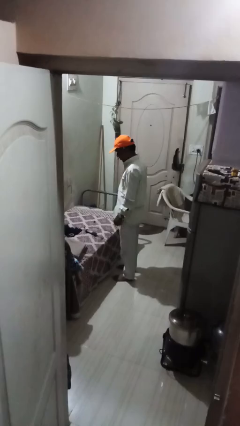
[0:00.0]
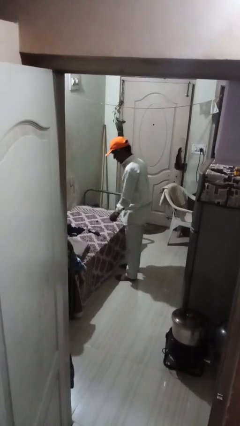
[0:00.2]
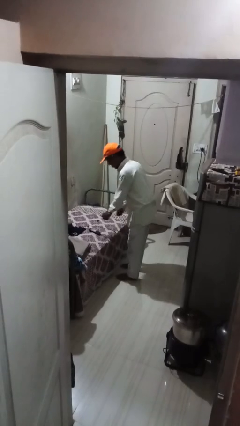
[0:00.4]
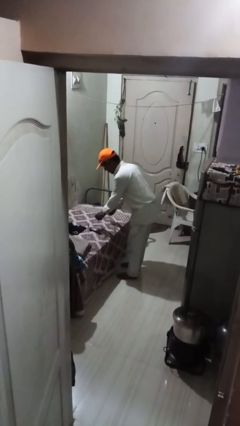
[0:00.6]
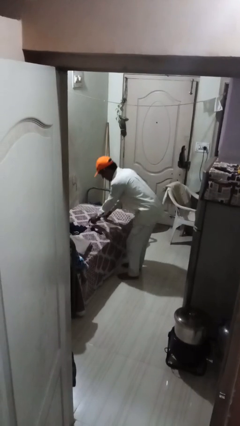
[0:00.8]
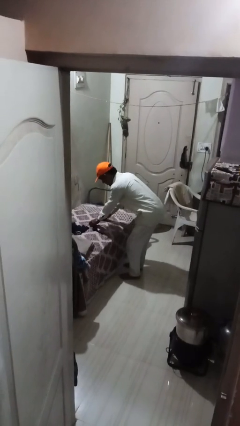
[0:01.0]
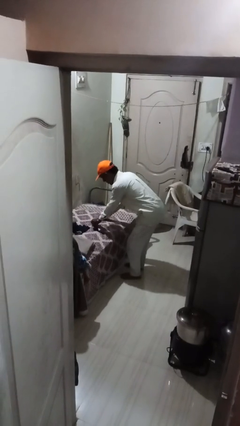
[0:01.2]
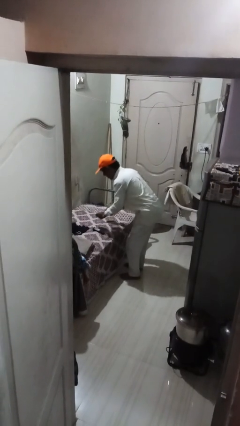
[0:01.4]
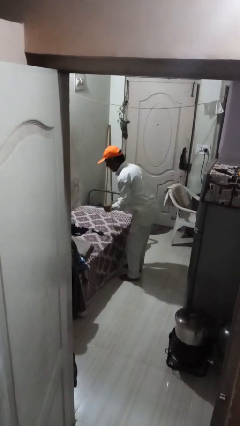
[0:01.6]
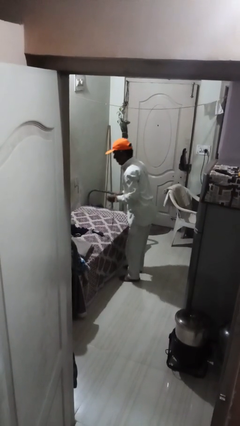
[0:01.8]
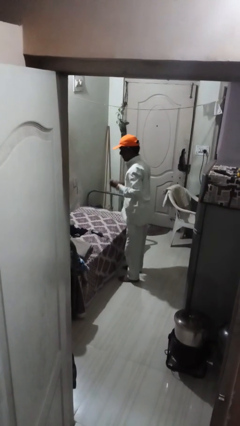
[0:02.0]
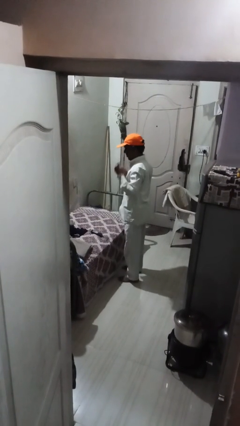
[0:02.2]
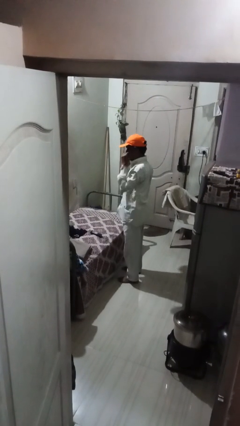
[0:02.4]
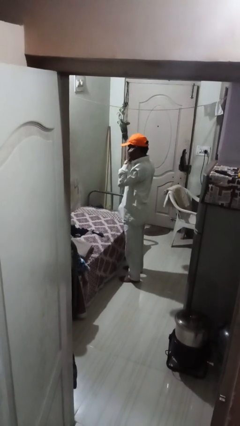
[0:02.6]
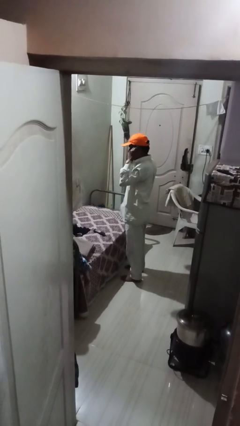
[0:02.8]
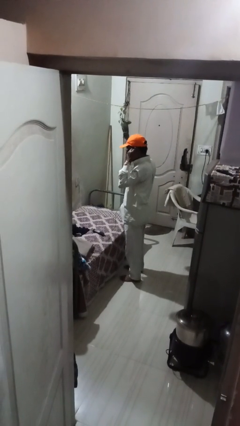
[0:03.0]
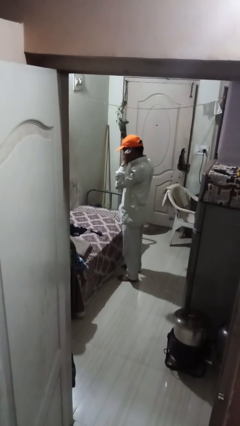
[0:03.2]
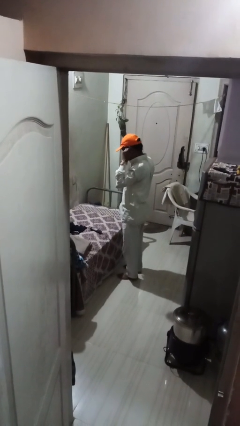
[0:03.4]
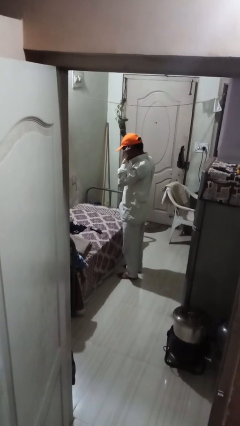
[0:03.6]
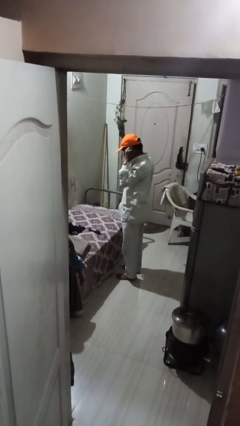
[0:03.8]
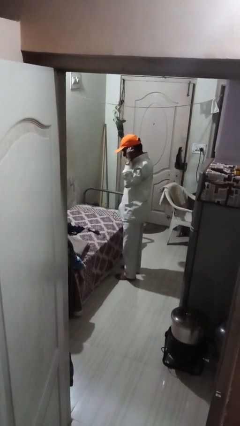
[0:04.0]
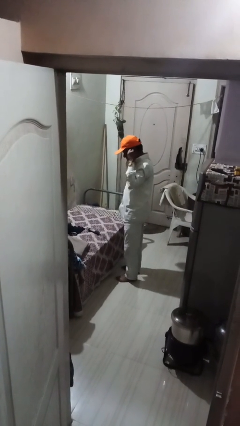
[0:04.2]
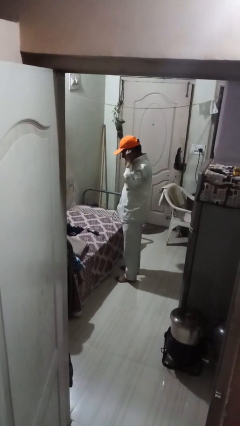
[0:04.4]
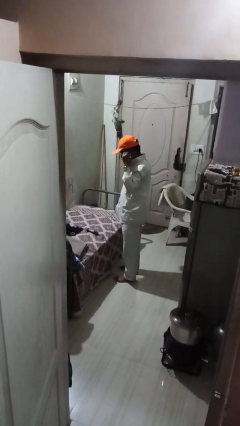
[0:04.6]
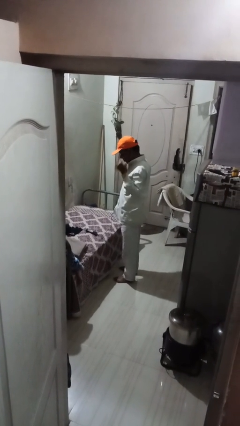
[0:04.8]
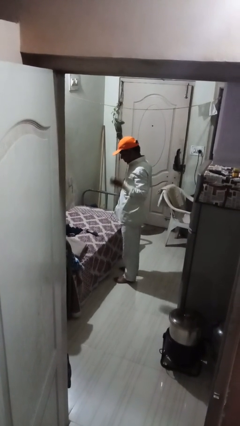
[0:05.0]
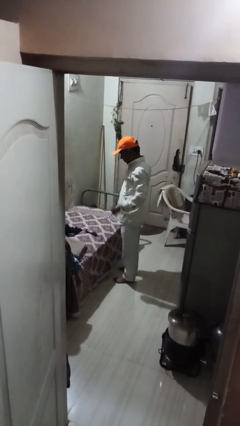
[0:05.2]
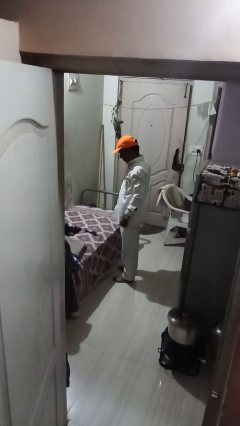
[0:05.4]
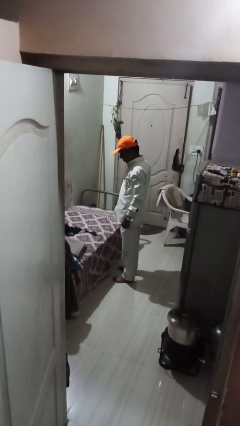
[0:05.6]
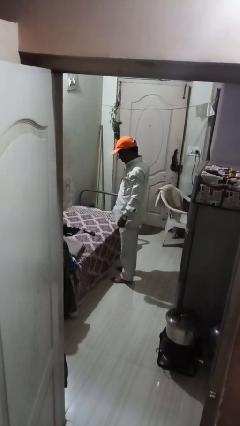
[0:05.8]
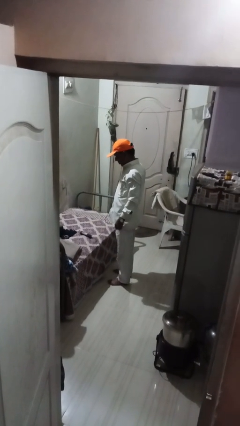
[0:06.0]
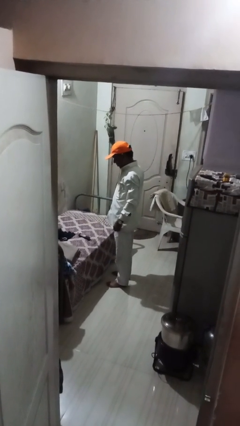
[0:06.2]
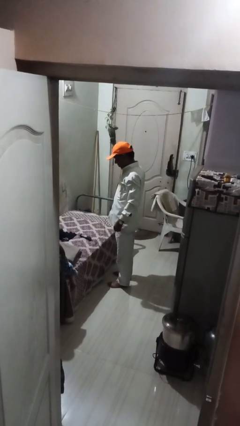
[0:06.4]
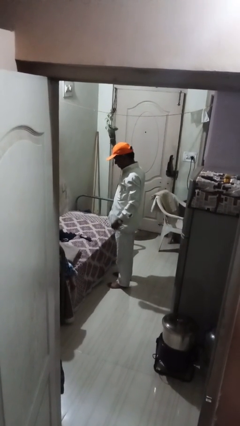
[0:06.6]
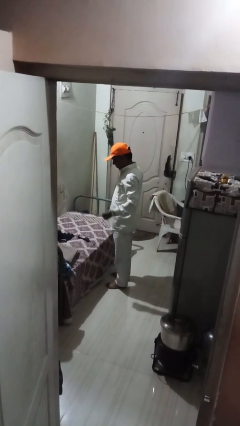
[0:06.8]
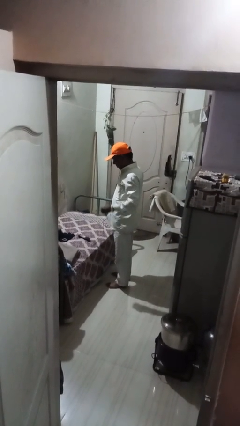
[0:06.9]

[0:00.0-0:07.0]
person puts on headphones

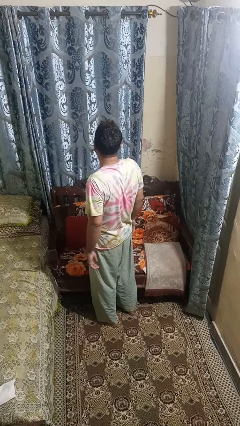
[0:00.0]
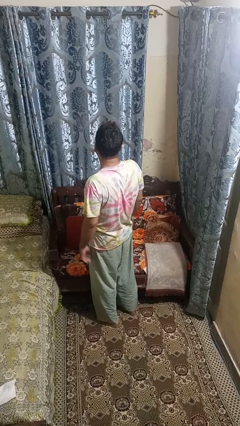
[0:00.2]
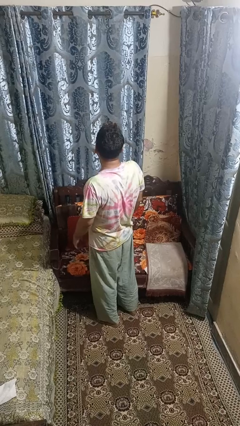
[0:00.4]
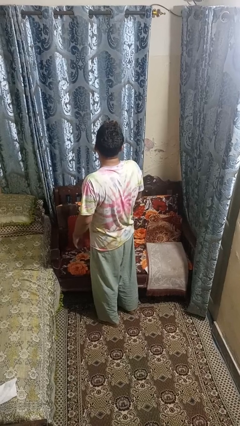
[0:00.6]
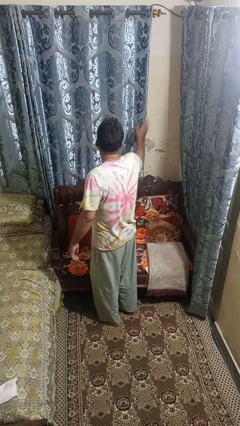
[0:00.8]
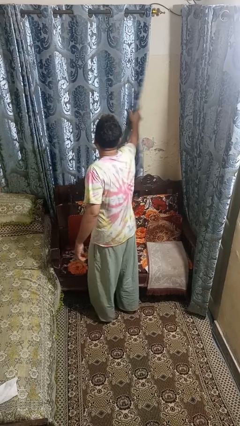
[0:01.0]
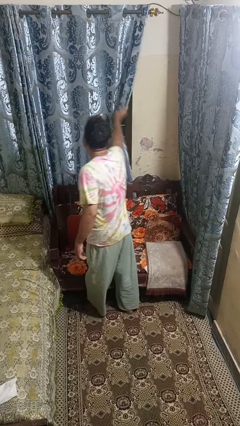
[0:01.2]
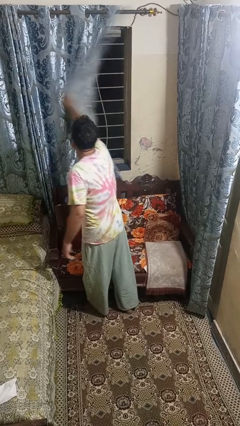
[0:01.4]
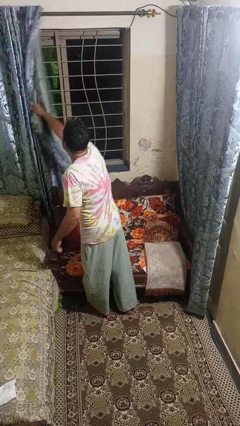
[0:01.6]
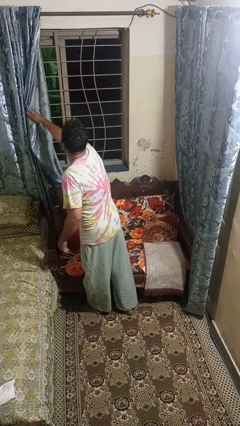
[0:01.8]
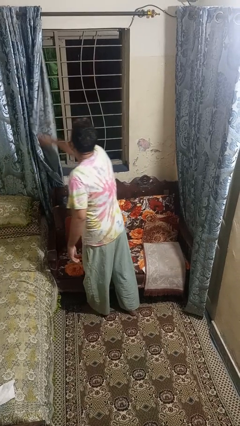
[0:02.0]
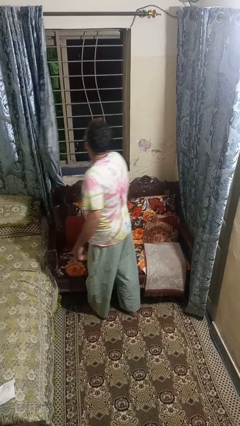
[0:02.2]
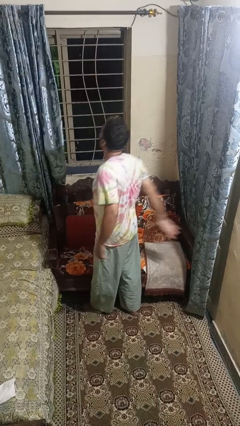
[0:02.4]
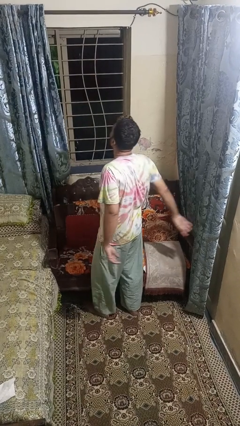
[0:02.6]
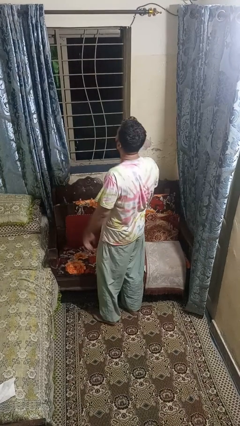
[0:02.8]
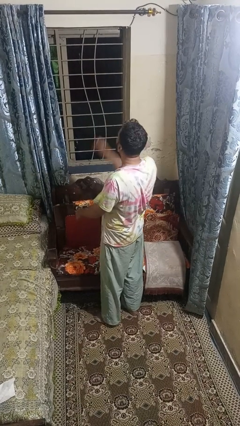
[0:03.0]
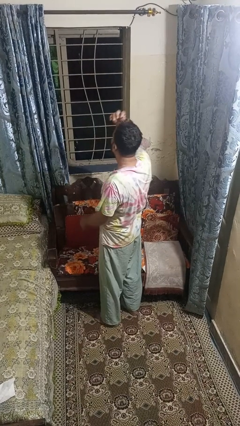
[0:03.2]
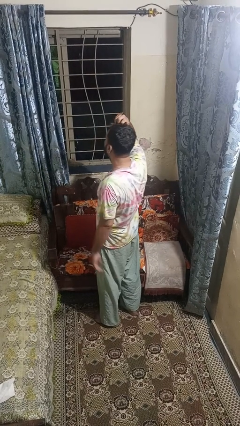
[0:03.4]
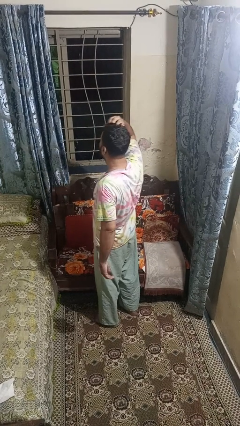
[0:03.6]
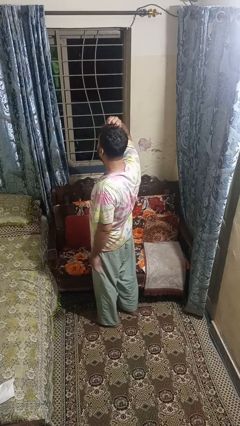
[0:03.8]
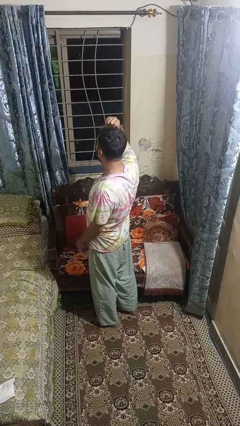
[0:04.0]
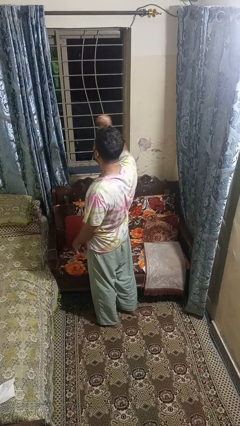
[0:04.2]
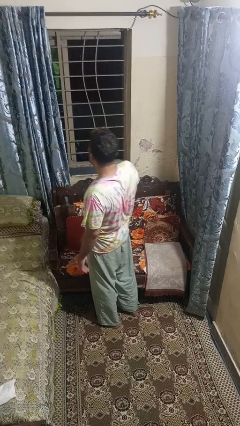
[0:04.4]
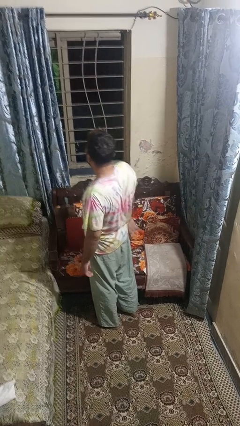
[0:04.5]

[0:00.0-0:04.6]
person opens curtains

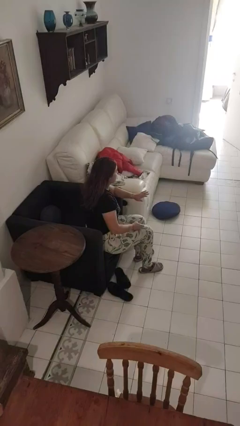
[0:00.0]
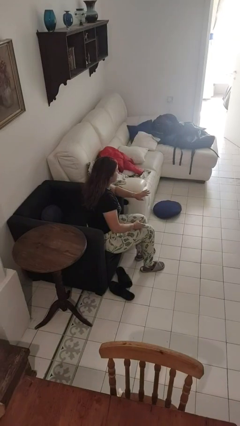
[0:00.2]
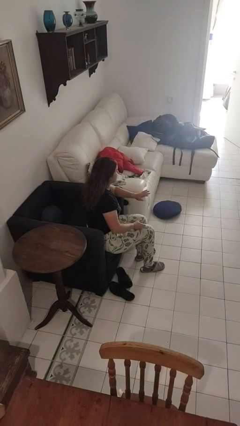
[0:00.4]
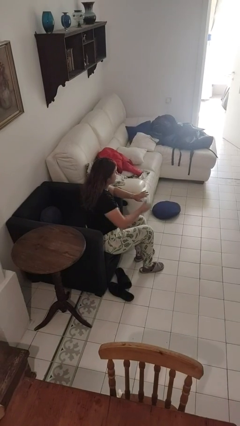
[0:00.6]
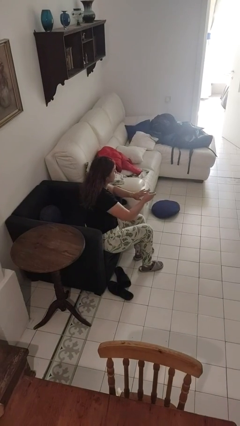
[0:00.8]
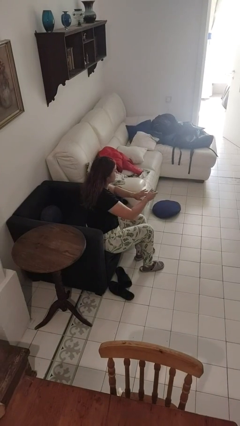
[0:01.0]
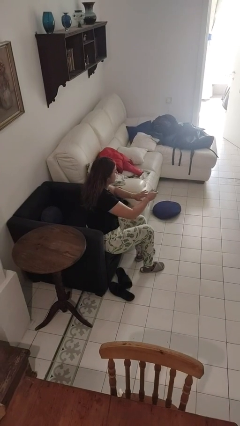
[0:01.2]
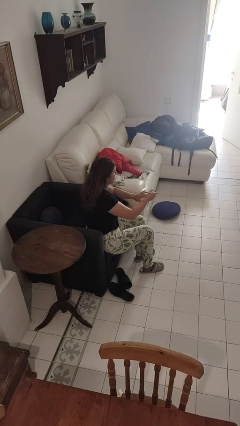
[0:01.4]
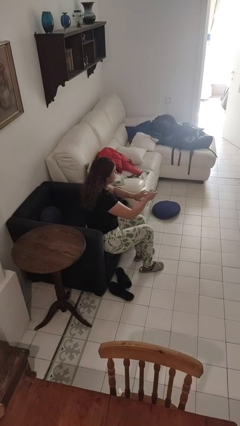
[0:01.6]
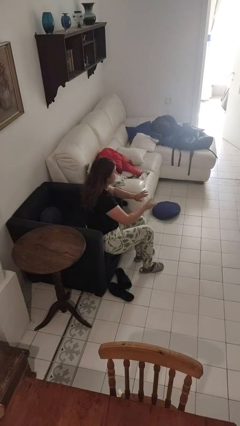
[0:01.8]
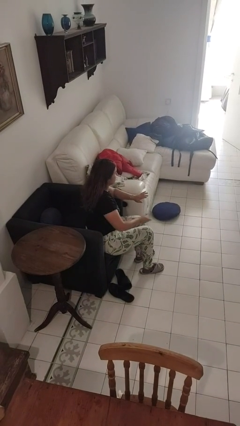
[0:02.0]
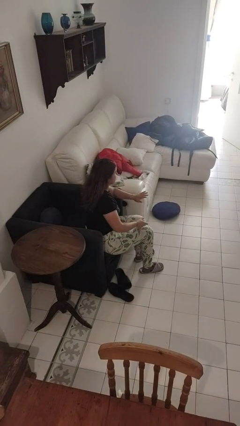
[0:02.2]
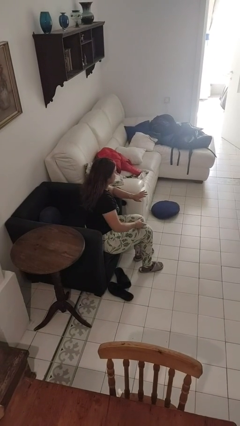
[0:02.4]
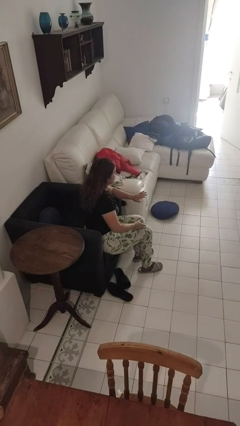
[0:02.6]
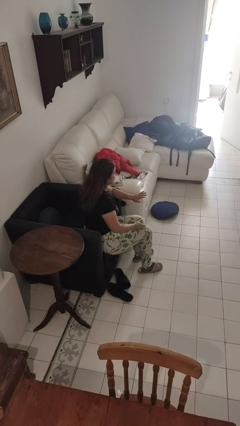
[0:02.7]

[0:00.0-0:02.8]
person clips fingernails

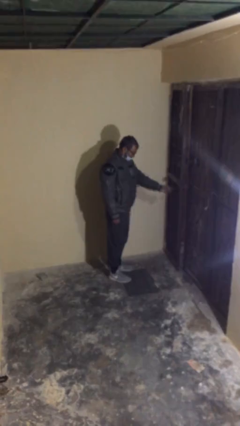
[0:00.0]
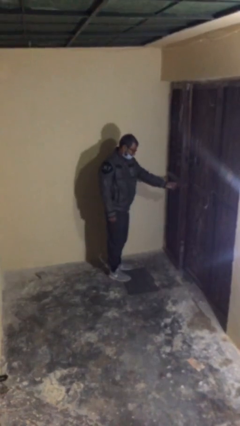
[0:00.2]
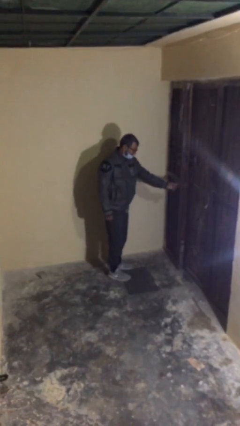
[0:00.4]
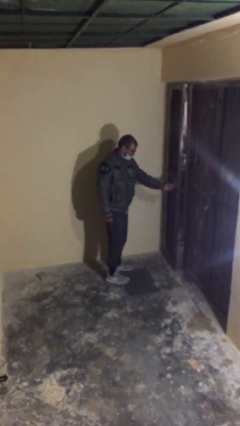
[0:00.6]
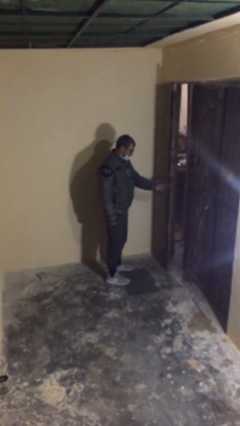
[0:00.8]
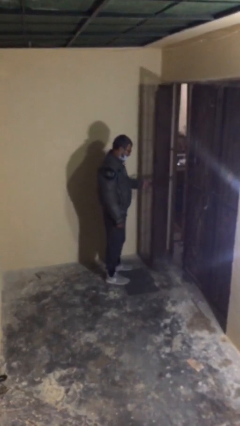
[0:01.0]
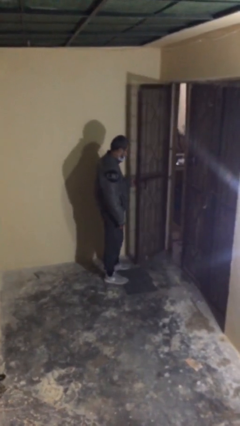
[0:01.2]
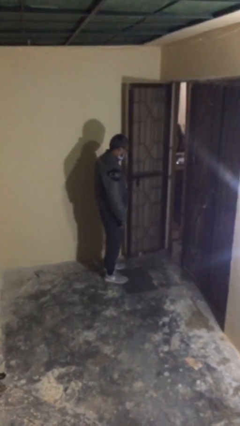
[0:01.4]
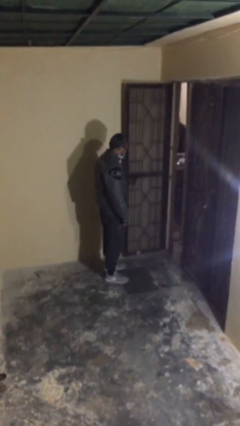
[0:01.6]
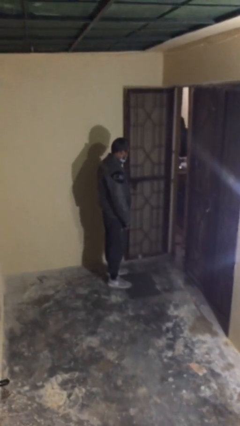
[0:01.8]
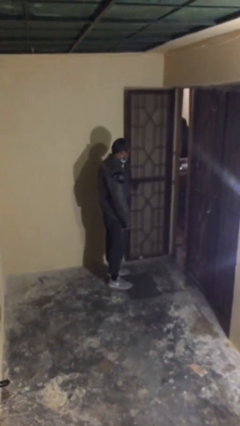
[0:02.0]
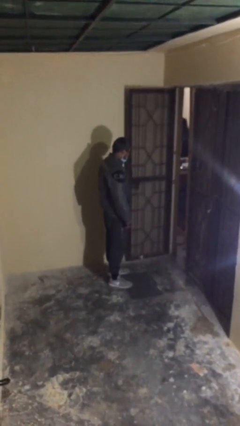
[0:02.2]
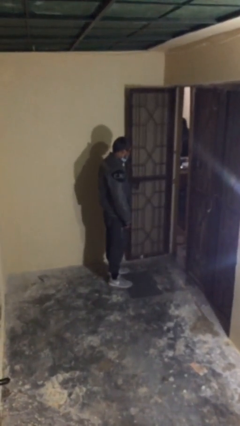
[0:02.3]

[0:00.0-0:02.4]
person opens facility door

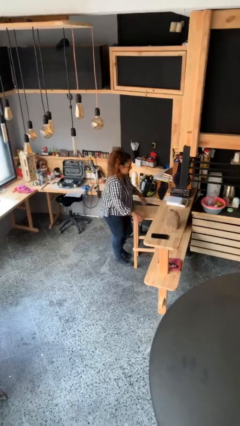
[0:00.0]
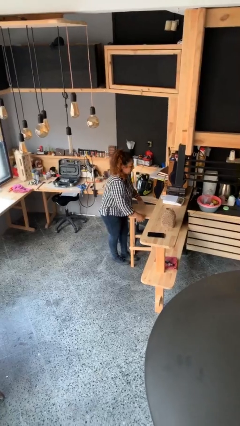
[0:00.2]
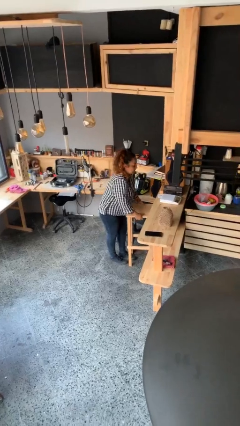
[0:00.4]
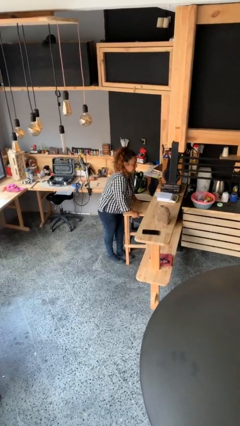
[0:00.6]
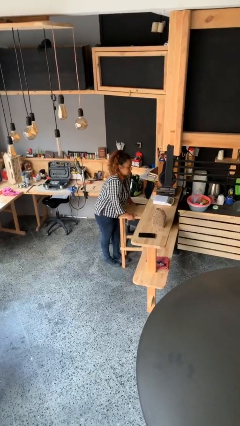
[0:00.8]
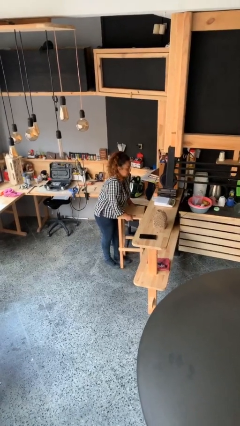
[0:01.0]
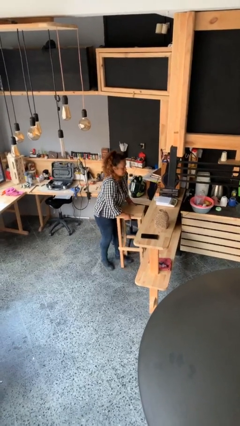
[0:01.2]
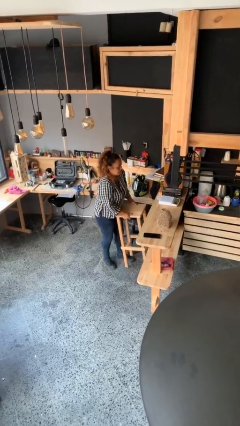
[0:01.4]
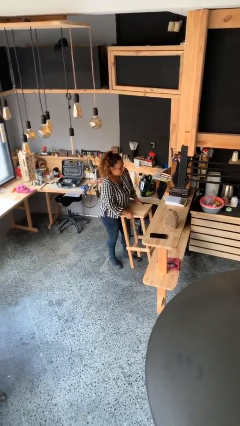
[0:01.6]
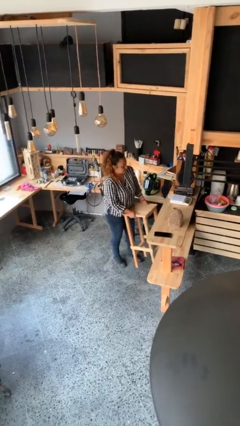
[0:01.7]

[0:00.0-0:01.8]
person picks up object from floor
